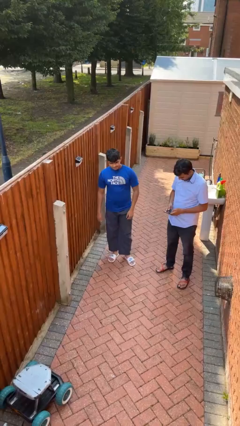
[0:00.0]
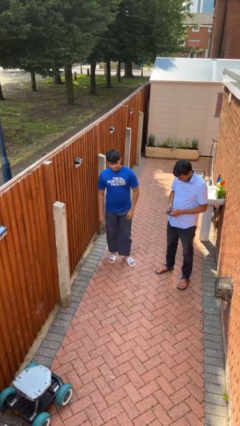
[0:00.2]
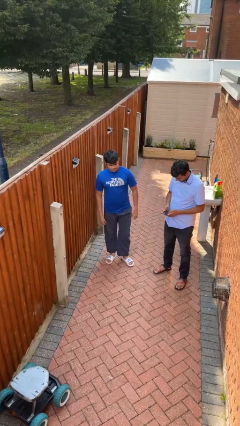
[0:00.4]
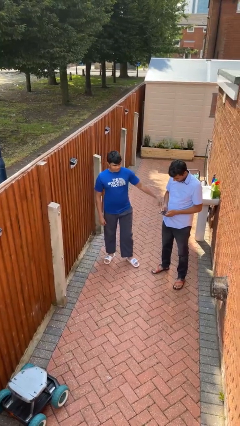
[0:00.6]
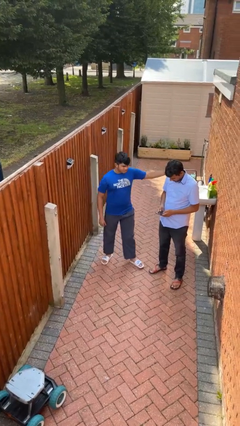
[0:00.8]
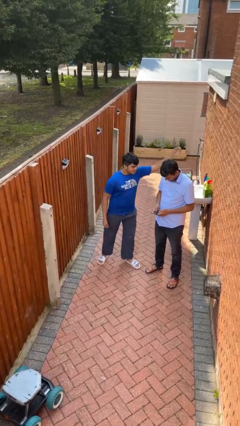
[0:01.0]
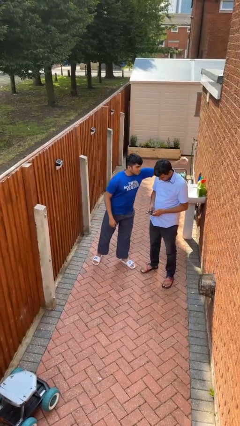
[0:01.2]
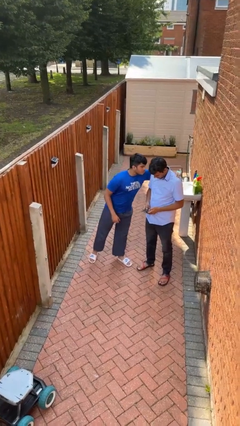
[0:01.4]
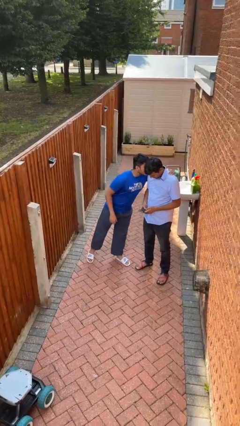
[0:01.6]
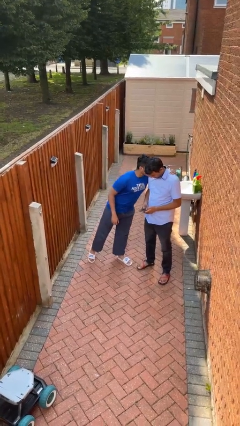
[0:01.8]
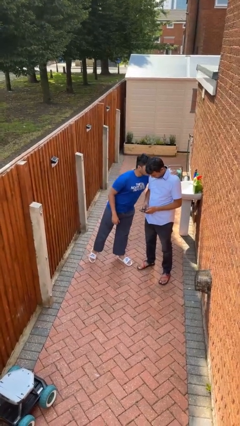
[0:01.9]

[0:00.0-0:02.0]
person kisses cheek of person

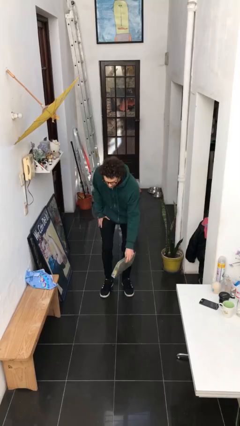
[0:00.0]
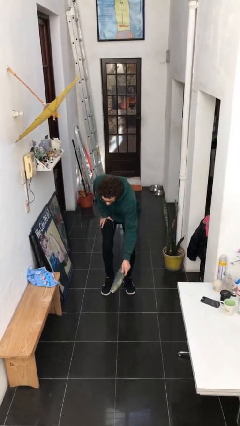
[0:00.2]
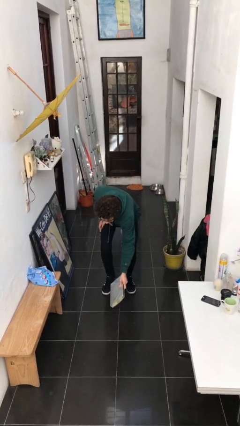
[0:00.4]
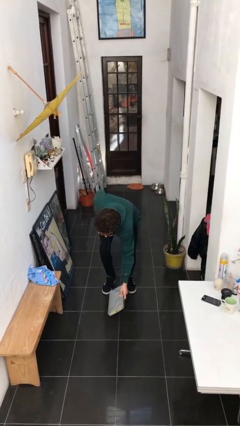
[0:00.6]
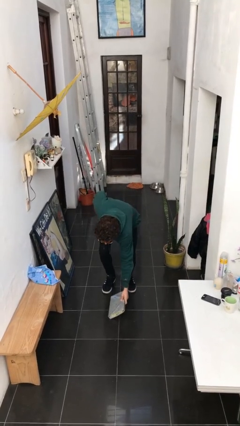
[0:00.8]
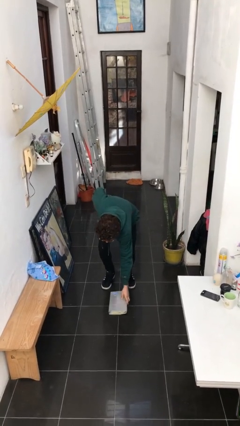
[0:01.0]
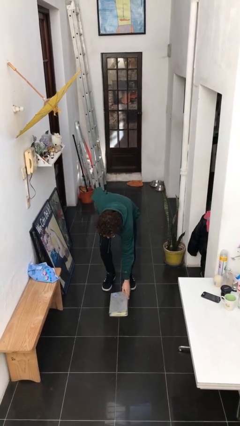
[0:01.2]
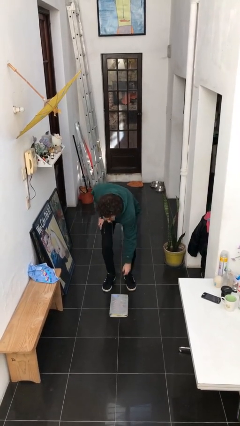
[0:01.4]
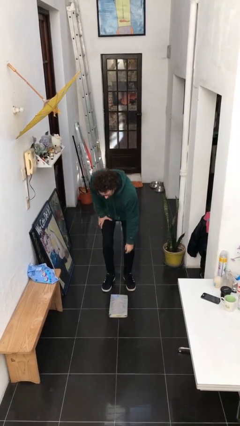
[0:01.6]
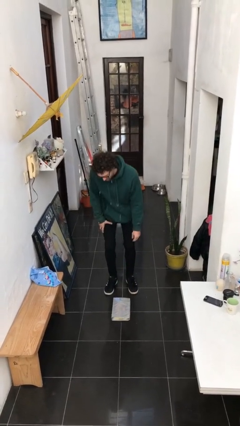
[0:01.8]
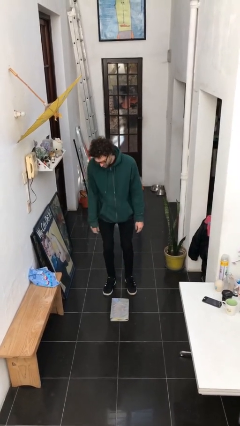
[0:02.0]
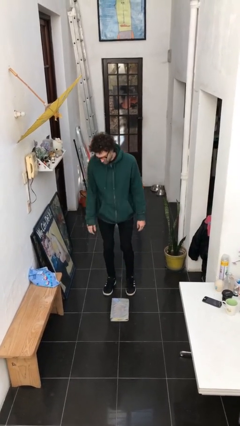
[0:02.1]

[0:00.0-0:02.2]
person puts down object on floor

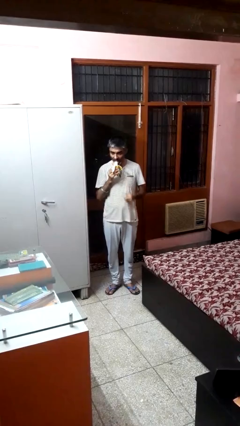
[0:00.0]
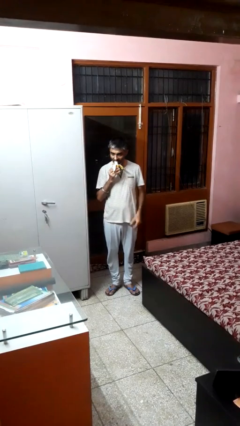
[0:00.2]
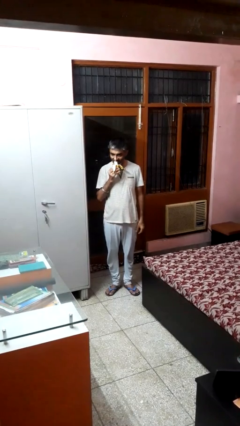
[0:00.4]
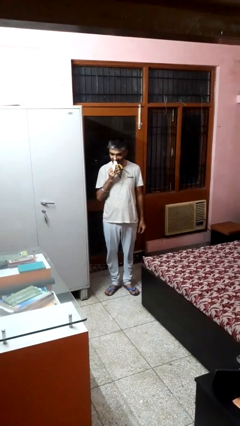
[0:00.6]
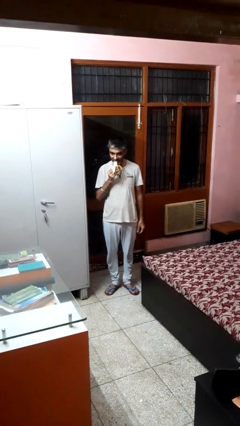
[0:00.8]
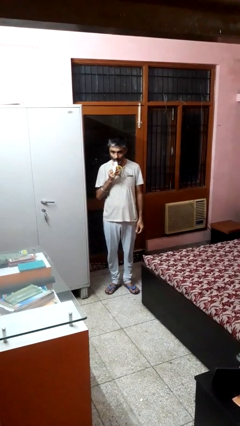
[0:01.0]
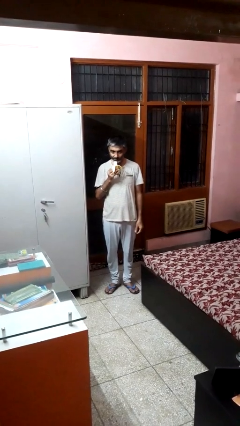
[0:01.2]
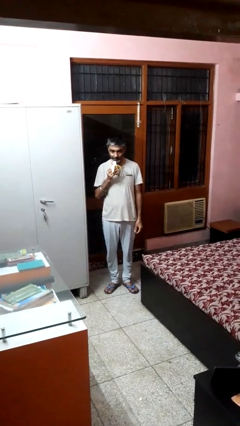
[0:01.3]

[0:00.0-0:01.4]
person eats banana

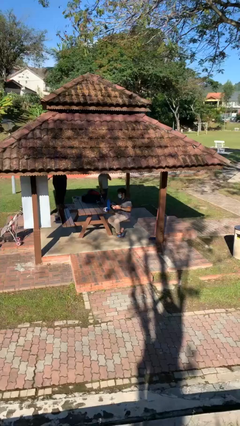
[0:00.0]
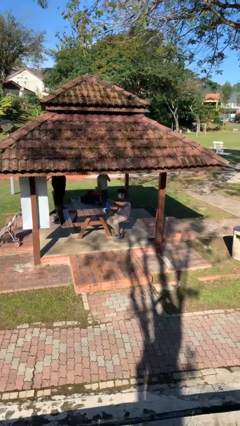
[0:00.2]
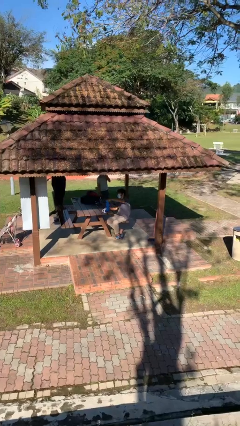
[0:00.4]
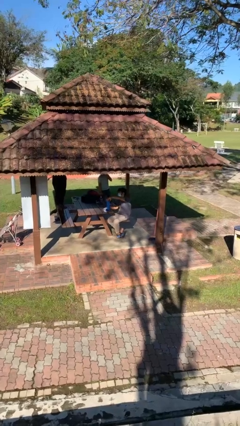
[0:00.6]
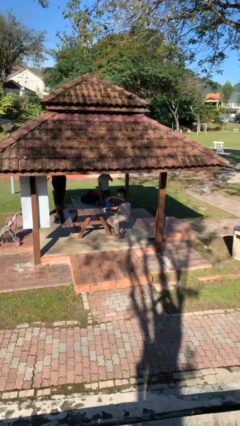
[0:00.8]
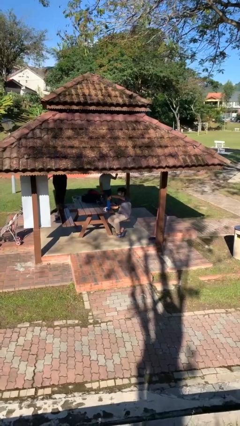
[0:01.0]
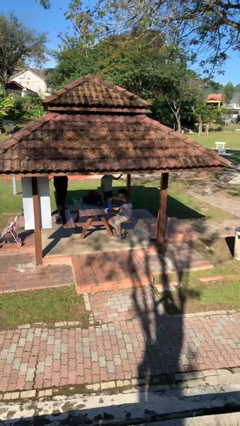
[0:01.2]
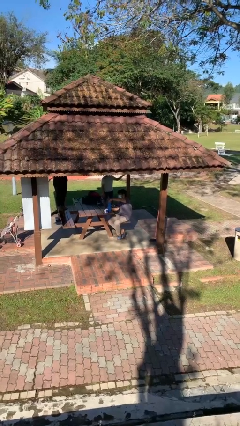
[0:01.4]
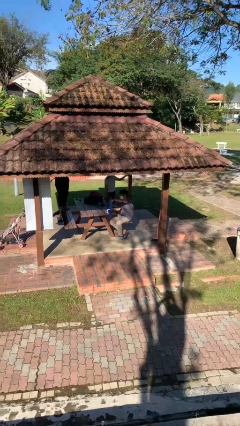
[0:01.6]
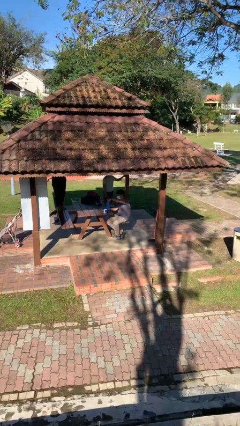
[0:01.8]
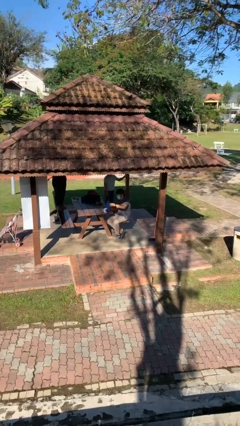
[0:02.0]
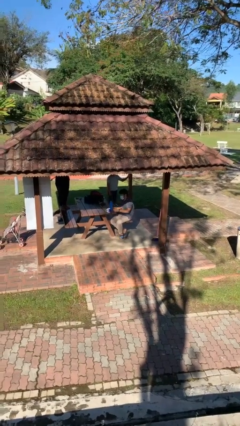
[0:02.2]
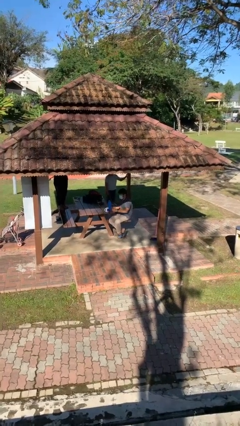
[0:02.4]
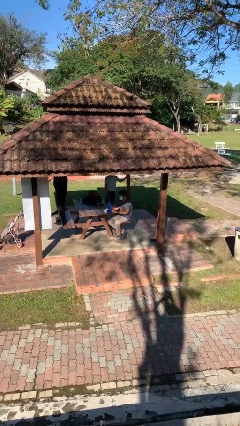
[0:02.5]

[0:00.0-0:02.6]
person unscrews lid from bottle

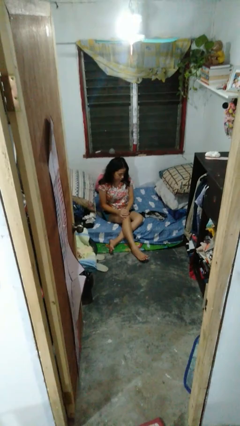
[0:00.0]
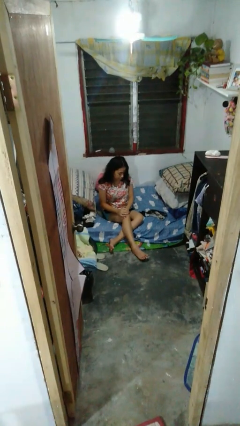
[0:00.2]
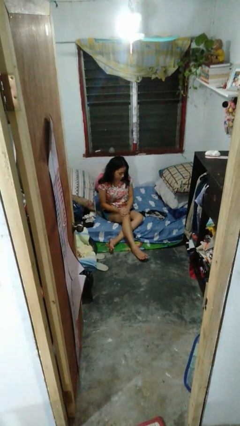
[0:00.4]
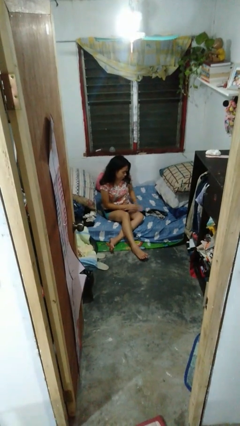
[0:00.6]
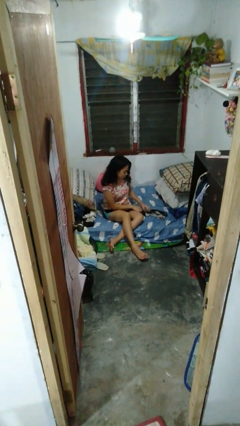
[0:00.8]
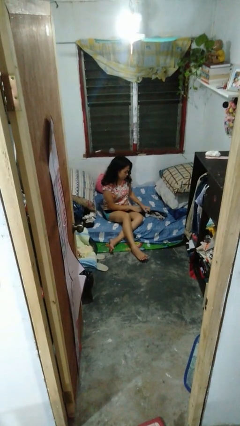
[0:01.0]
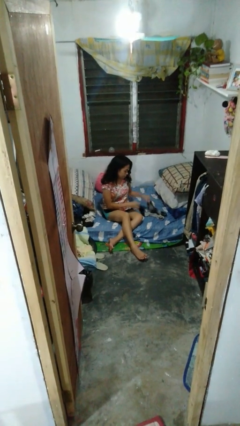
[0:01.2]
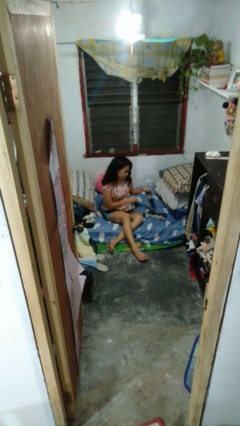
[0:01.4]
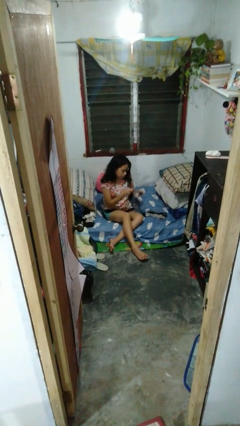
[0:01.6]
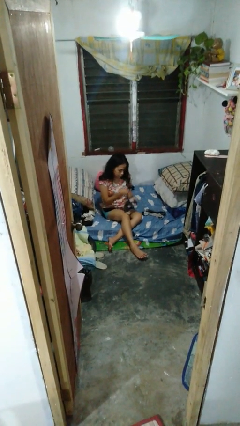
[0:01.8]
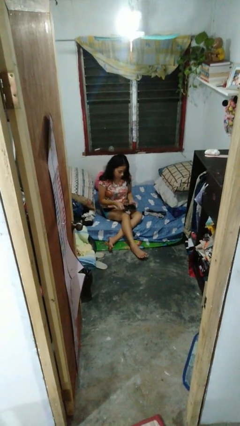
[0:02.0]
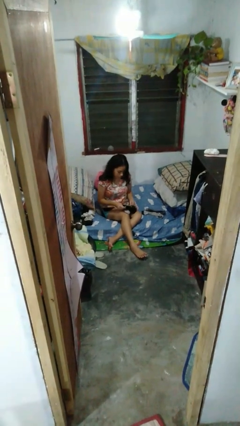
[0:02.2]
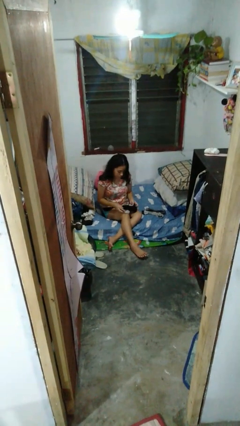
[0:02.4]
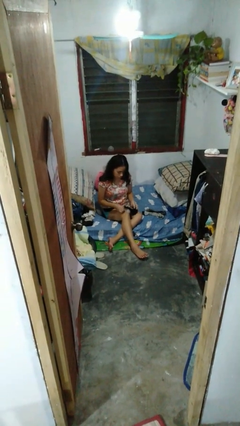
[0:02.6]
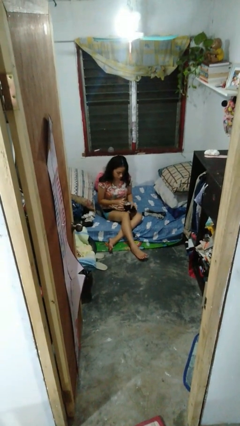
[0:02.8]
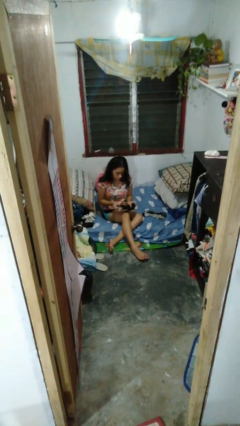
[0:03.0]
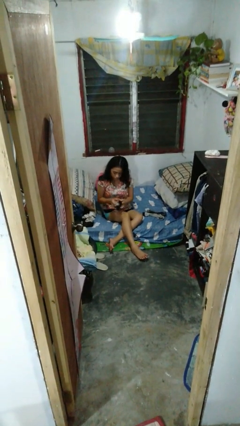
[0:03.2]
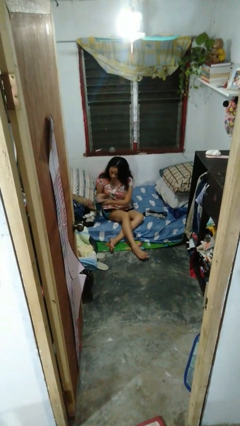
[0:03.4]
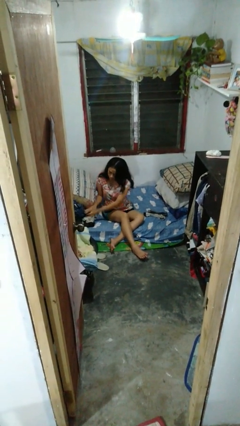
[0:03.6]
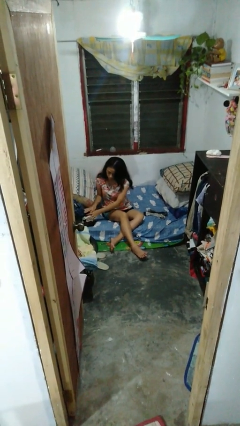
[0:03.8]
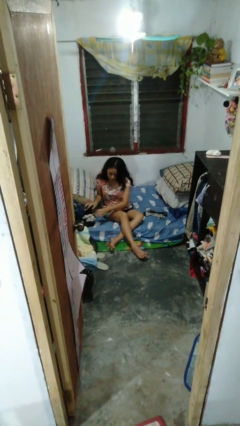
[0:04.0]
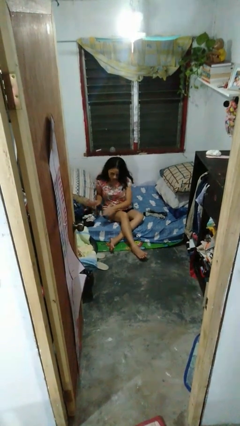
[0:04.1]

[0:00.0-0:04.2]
person folds socks

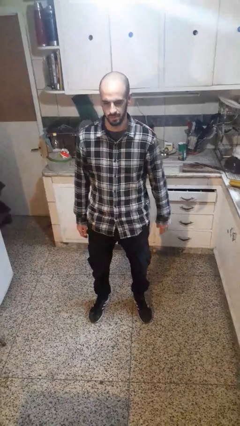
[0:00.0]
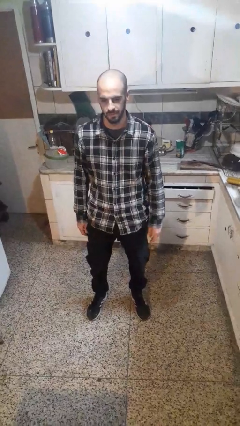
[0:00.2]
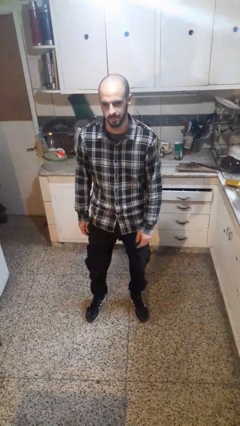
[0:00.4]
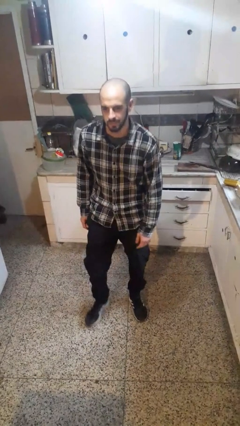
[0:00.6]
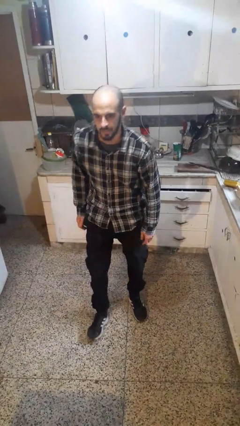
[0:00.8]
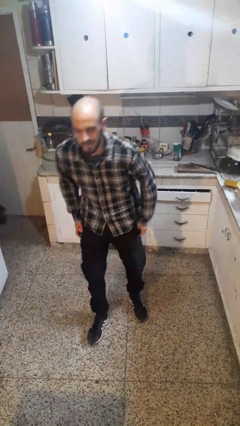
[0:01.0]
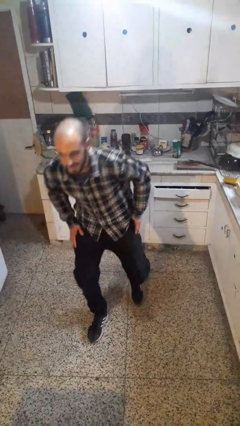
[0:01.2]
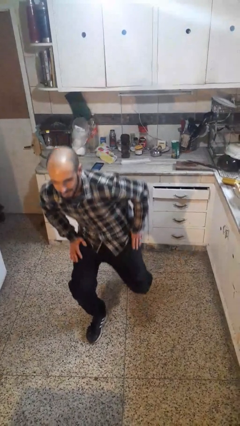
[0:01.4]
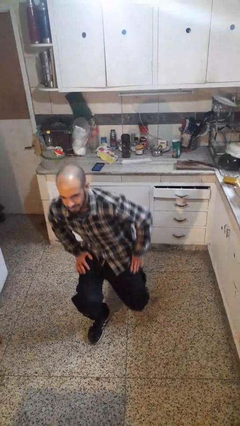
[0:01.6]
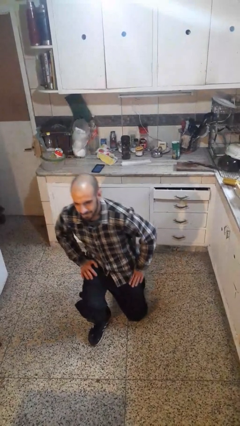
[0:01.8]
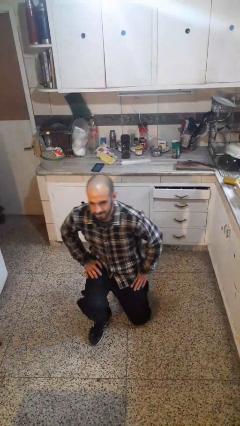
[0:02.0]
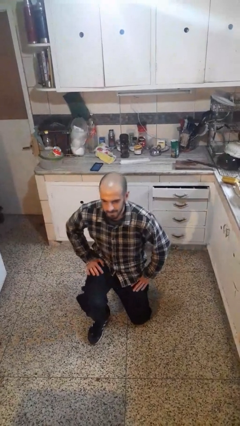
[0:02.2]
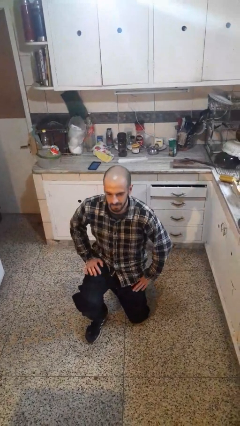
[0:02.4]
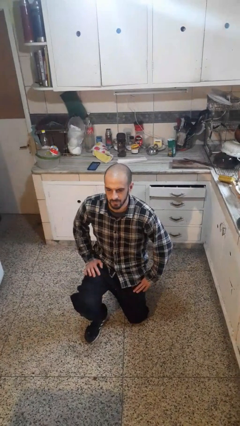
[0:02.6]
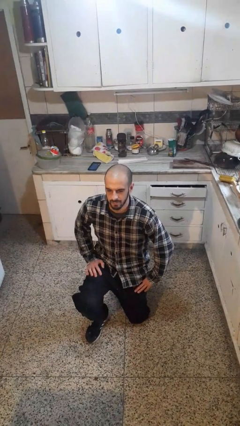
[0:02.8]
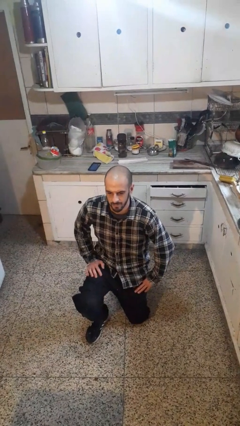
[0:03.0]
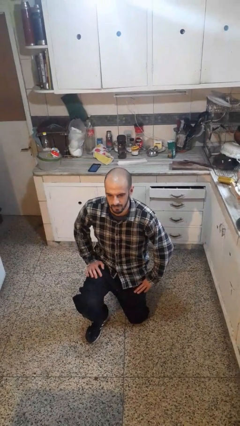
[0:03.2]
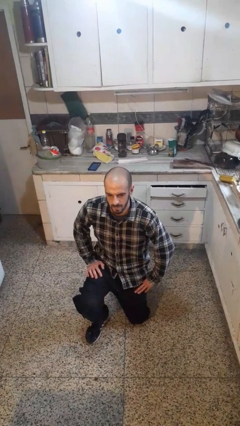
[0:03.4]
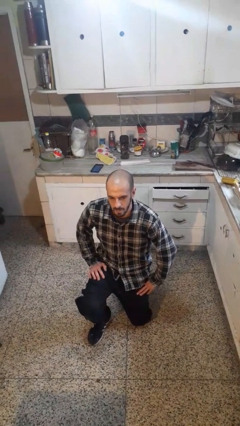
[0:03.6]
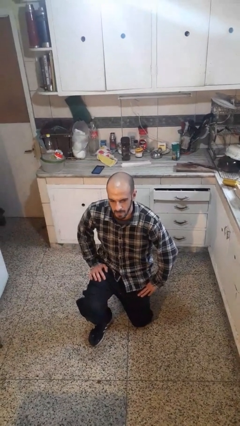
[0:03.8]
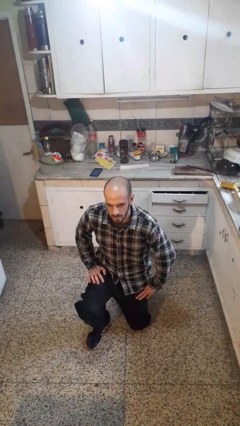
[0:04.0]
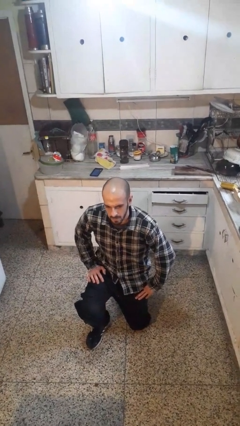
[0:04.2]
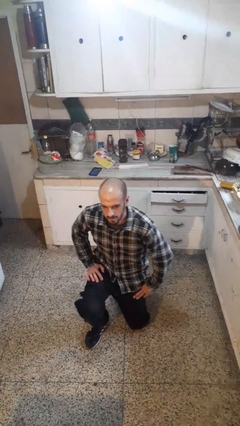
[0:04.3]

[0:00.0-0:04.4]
person kneels

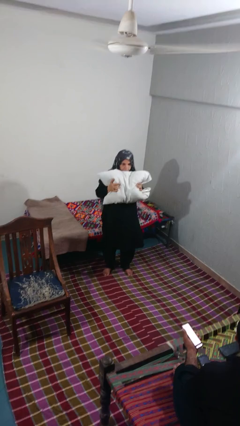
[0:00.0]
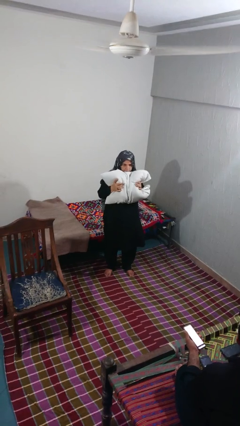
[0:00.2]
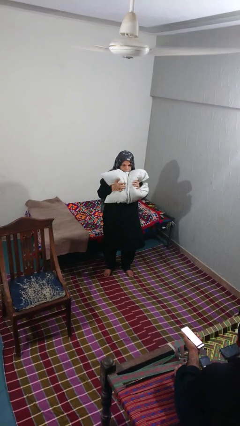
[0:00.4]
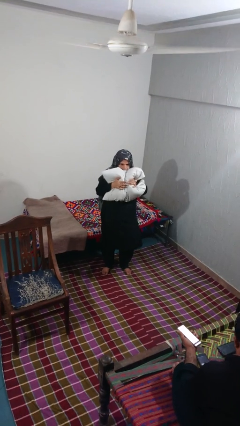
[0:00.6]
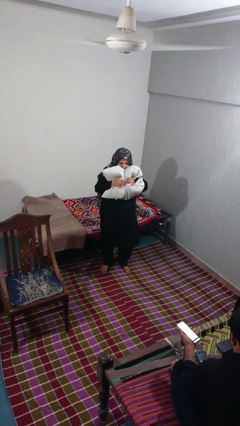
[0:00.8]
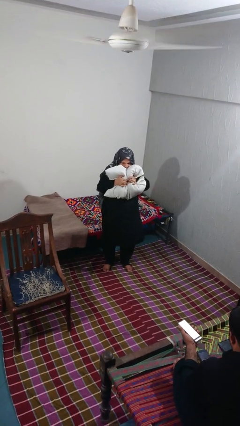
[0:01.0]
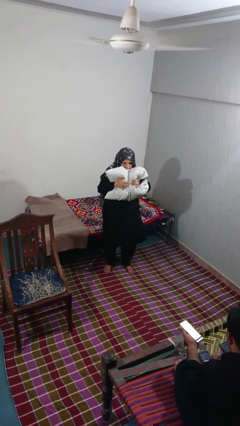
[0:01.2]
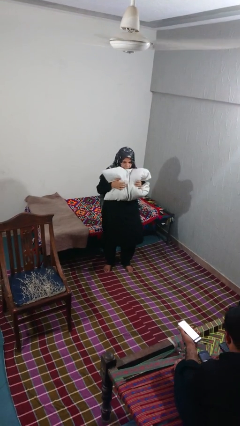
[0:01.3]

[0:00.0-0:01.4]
person squeezes object
